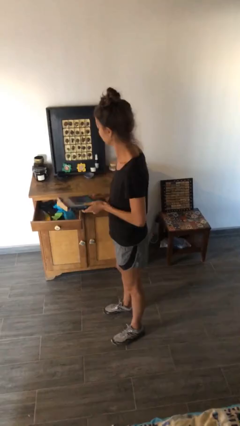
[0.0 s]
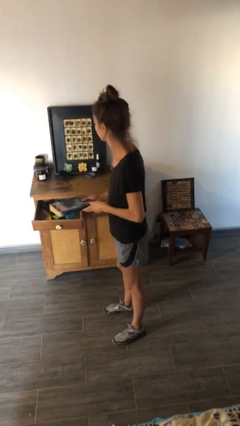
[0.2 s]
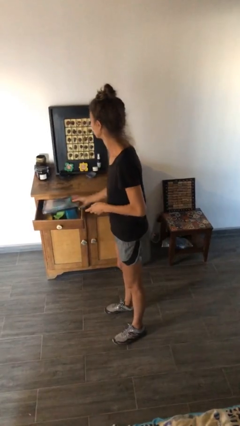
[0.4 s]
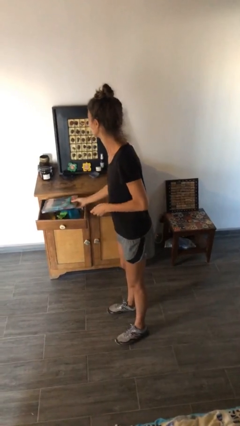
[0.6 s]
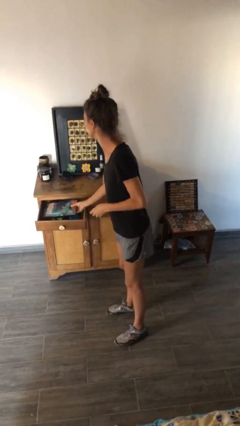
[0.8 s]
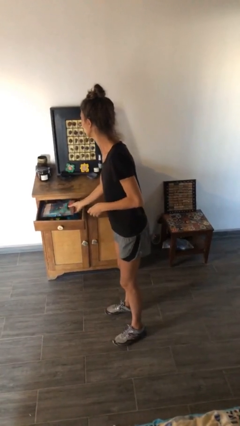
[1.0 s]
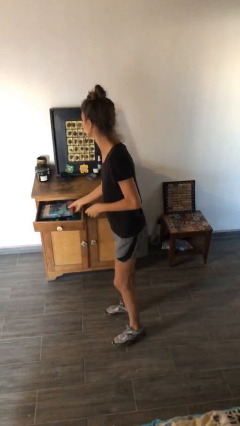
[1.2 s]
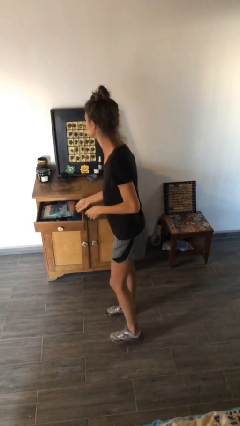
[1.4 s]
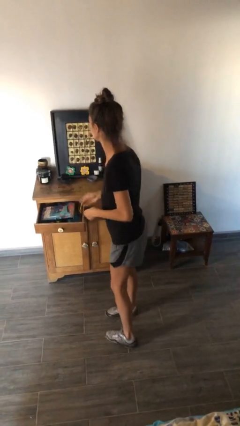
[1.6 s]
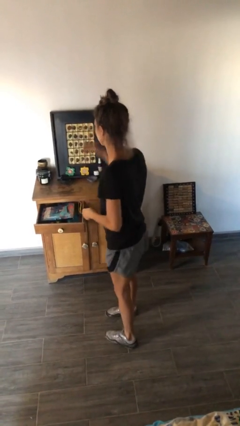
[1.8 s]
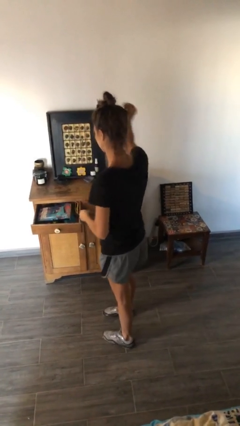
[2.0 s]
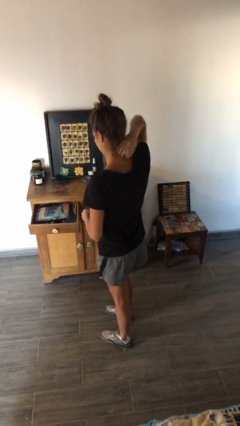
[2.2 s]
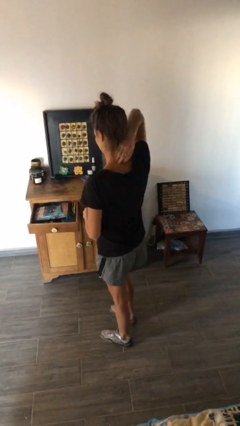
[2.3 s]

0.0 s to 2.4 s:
person puts down object into cabinet

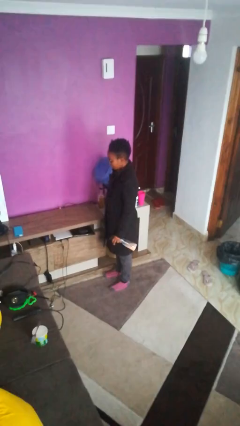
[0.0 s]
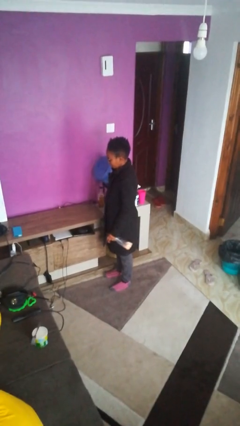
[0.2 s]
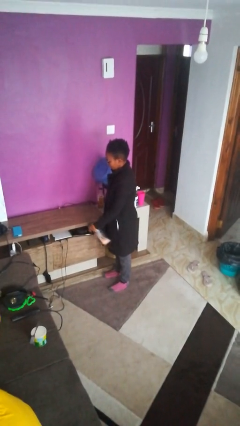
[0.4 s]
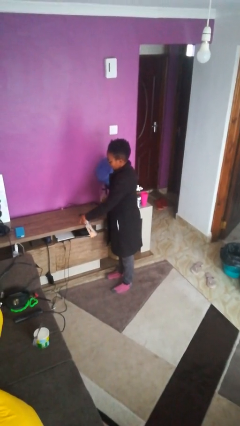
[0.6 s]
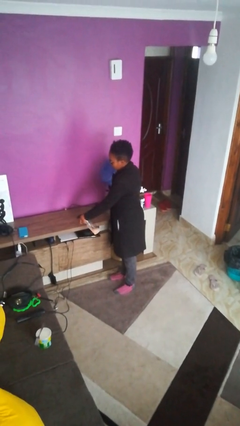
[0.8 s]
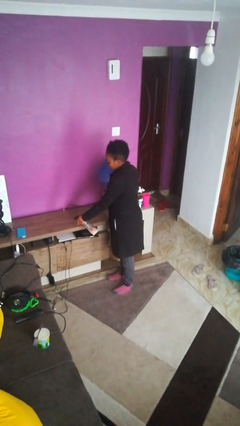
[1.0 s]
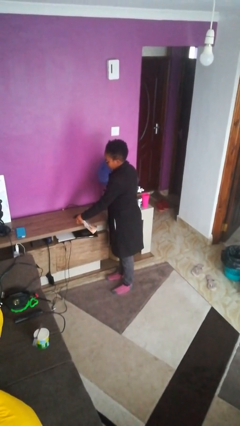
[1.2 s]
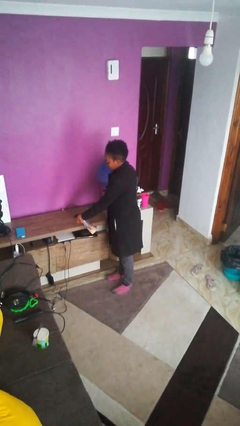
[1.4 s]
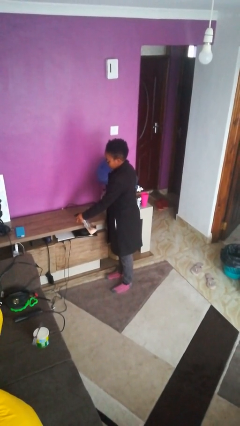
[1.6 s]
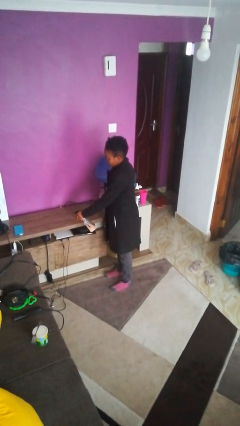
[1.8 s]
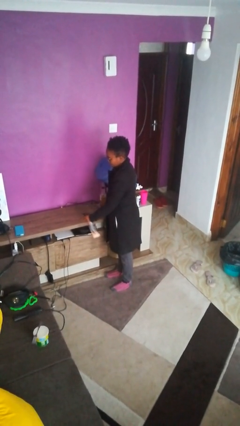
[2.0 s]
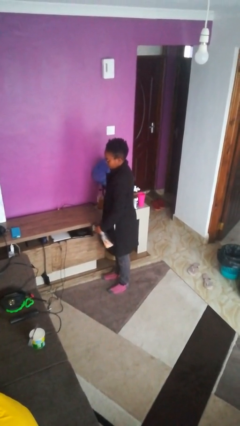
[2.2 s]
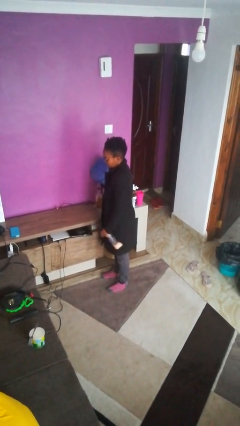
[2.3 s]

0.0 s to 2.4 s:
person sprays from bottle

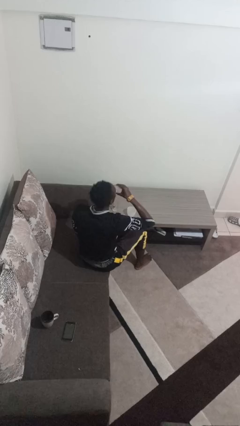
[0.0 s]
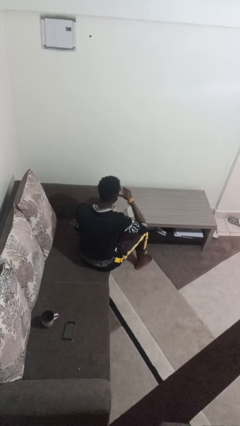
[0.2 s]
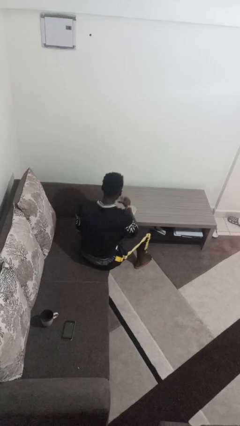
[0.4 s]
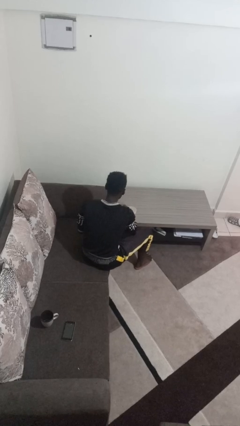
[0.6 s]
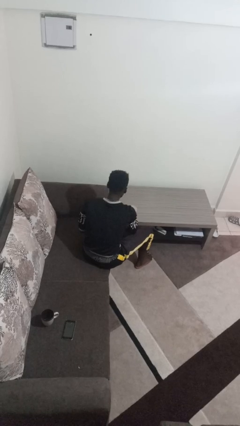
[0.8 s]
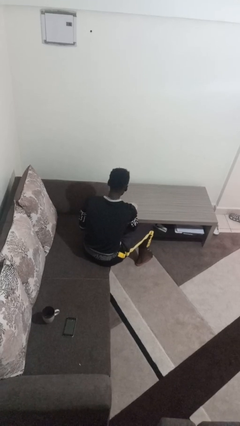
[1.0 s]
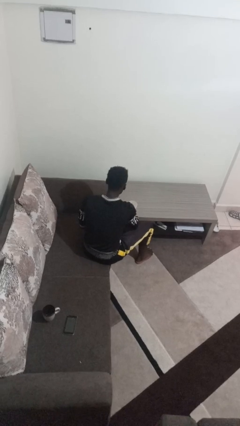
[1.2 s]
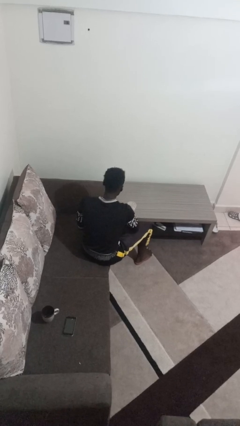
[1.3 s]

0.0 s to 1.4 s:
person puts down object on table

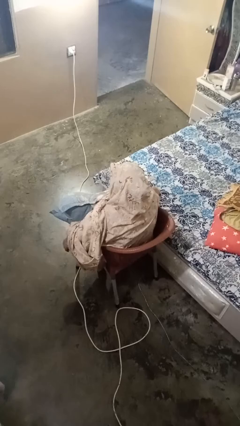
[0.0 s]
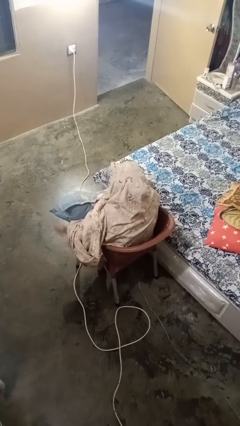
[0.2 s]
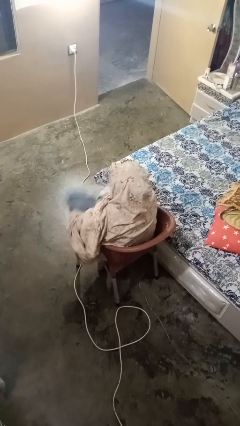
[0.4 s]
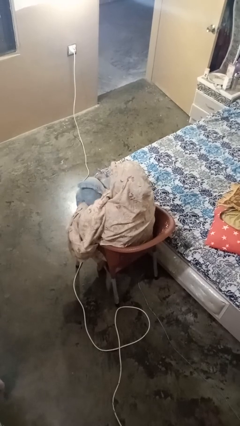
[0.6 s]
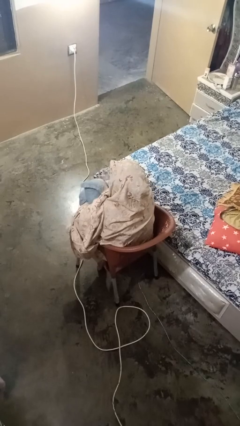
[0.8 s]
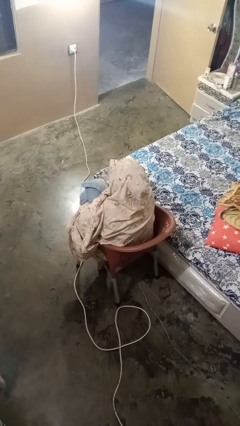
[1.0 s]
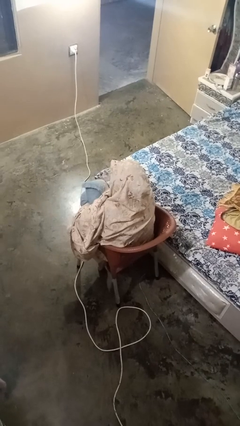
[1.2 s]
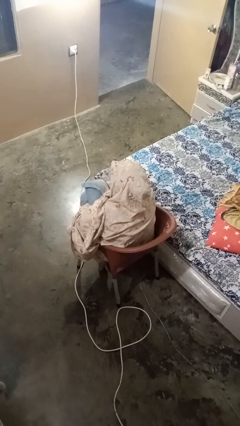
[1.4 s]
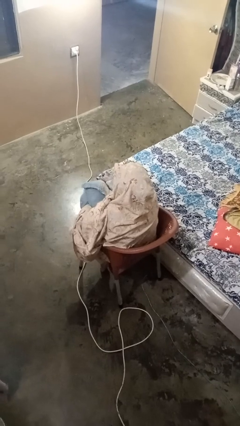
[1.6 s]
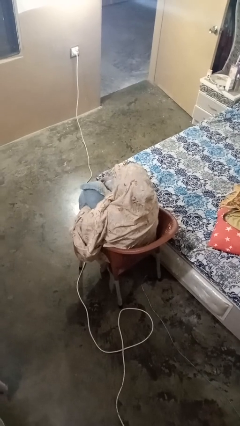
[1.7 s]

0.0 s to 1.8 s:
person squeezes object

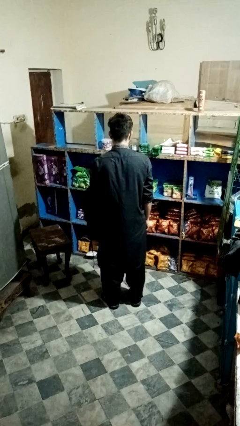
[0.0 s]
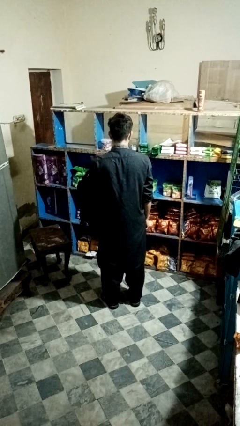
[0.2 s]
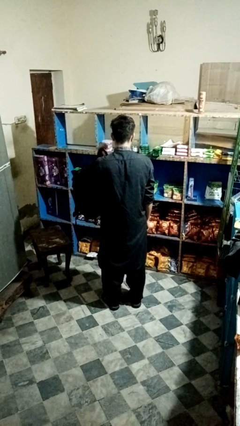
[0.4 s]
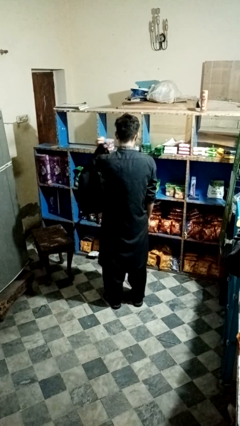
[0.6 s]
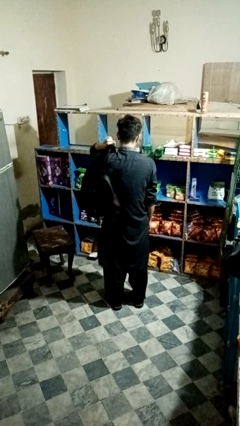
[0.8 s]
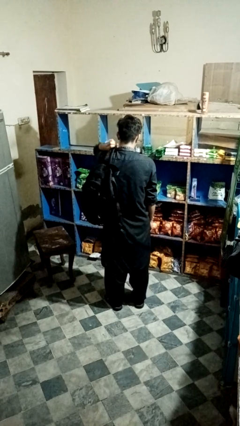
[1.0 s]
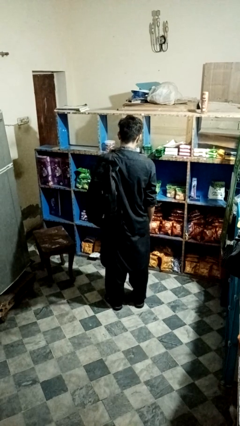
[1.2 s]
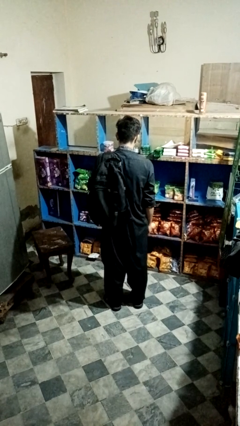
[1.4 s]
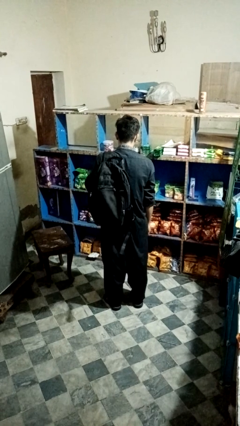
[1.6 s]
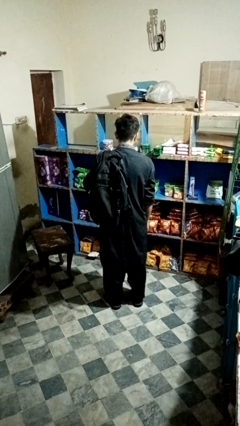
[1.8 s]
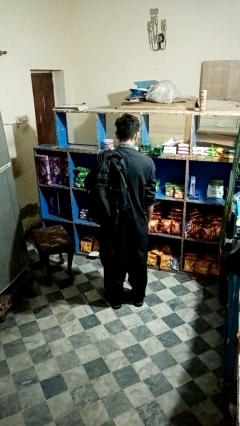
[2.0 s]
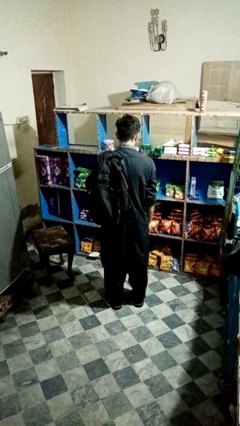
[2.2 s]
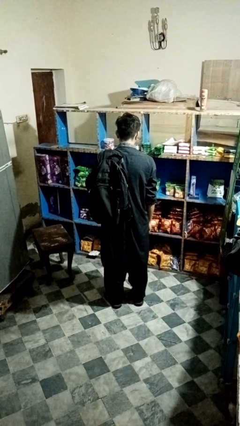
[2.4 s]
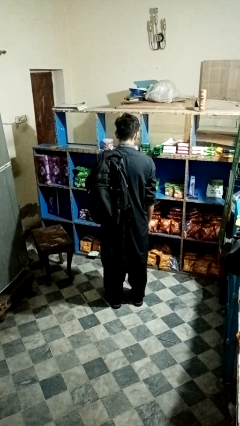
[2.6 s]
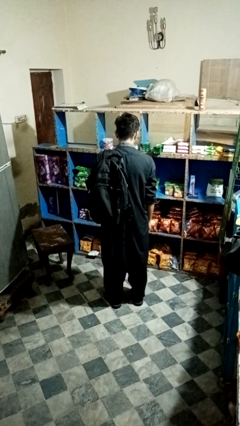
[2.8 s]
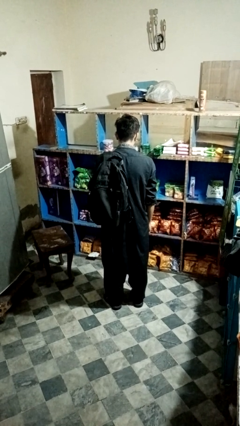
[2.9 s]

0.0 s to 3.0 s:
person puts on backpack

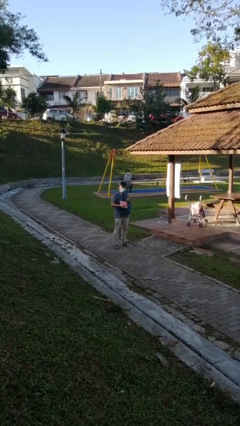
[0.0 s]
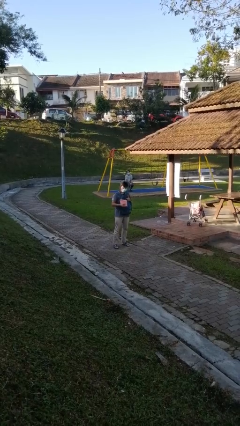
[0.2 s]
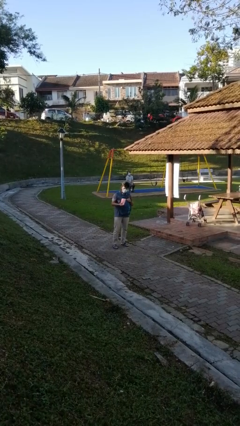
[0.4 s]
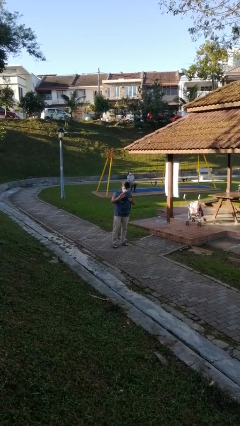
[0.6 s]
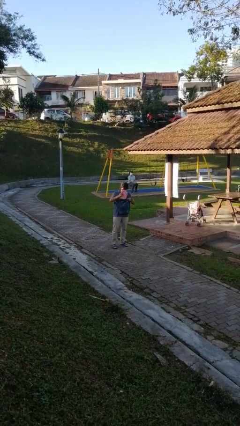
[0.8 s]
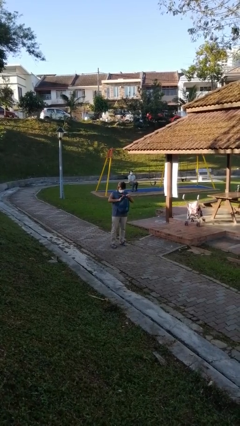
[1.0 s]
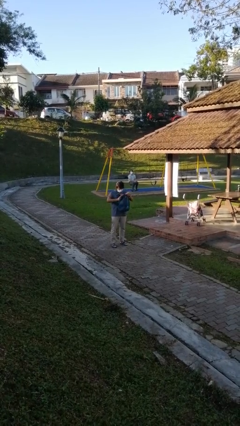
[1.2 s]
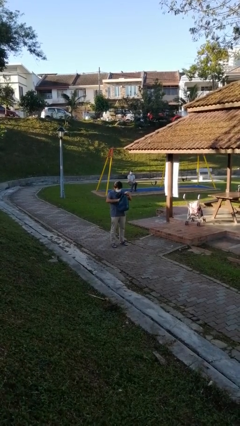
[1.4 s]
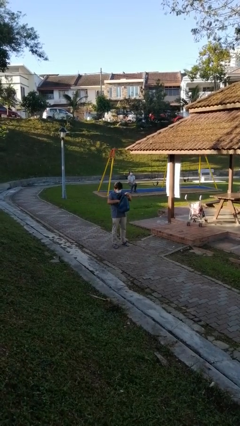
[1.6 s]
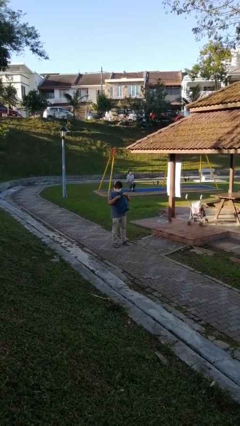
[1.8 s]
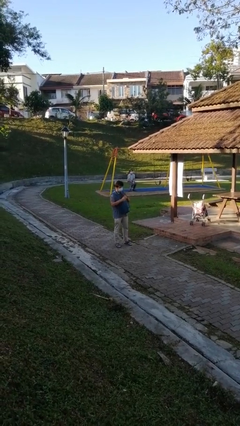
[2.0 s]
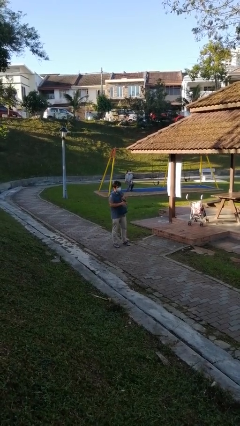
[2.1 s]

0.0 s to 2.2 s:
person puts object into backpack

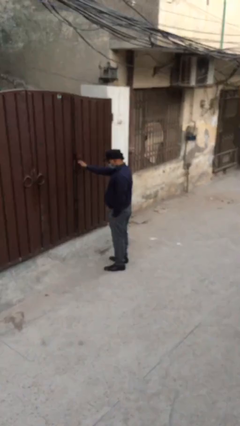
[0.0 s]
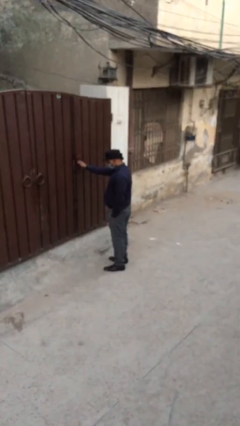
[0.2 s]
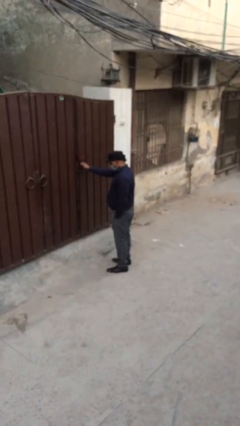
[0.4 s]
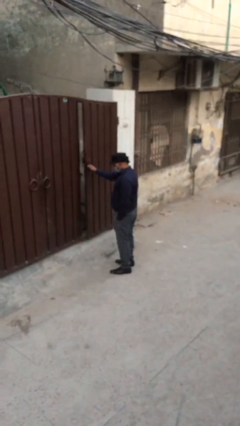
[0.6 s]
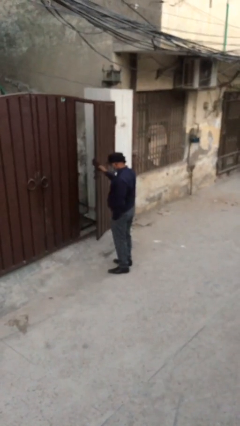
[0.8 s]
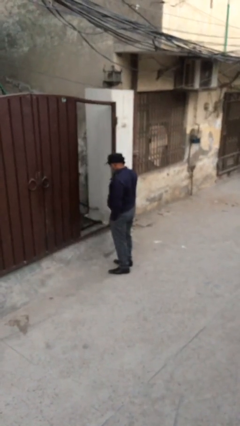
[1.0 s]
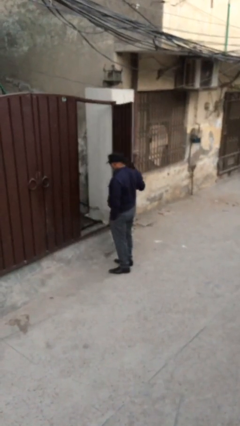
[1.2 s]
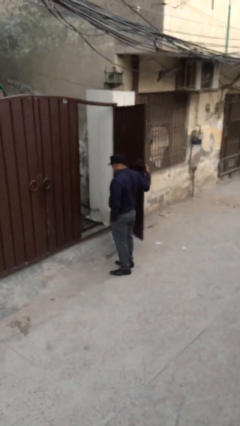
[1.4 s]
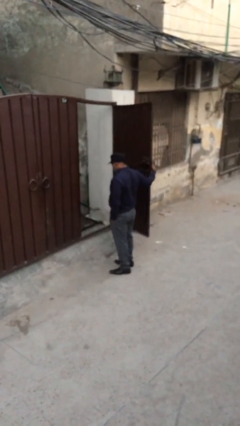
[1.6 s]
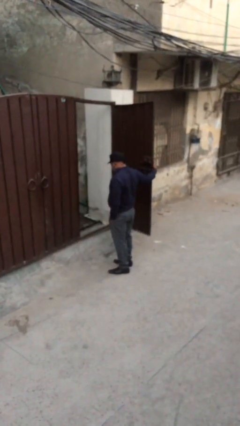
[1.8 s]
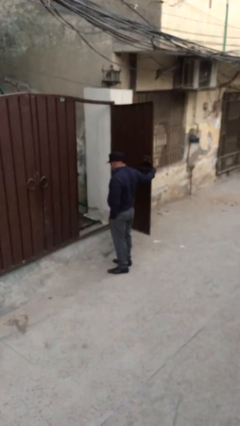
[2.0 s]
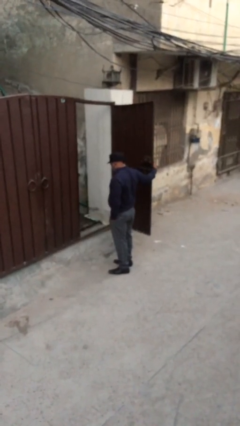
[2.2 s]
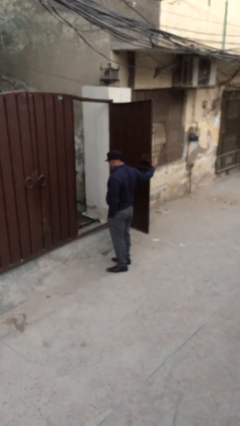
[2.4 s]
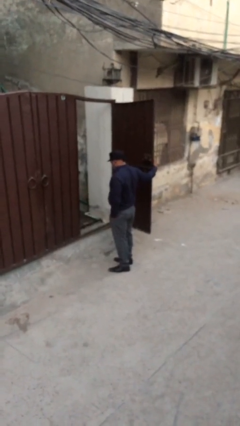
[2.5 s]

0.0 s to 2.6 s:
person opens facility door

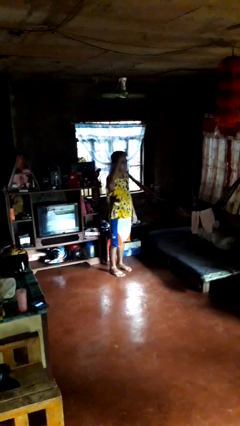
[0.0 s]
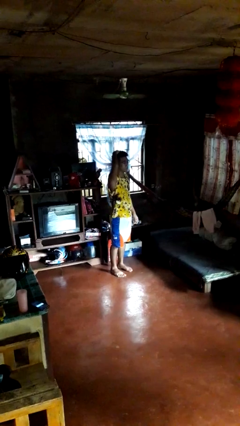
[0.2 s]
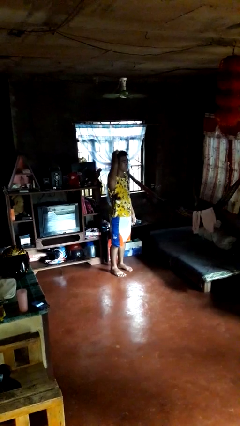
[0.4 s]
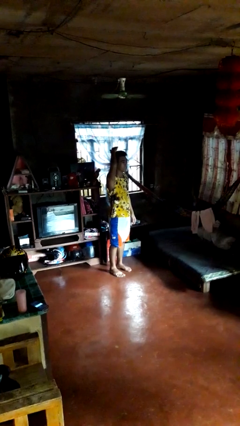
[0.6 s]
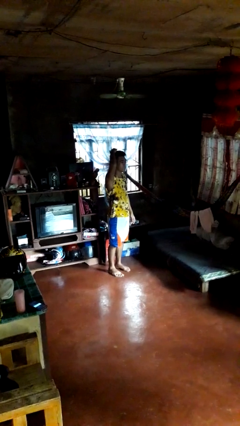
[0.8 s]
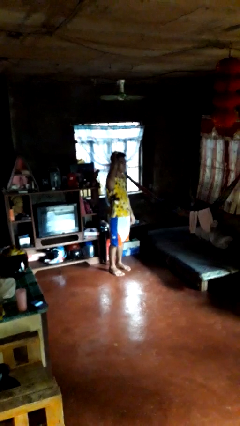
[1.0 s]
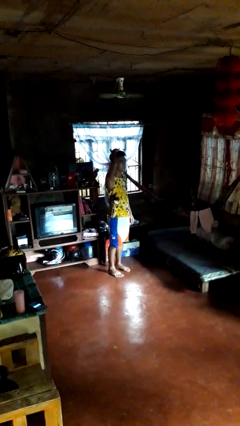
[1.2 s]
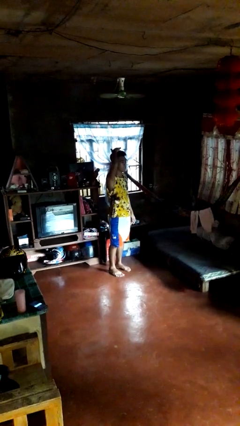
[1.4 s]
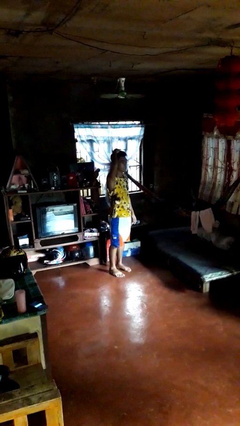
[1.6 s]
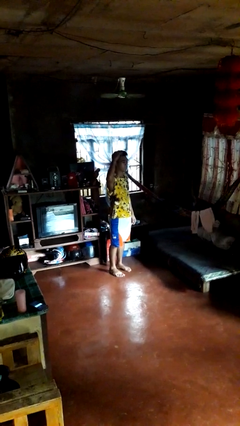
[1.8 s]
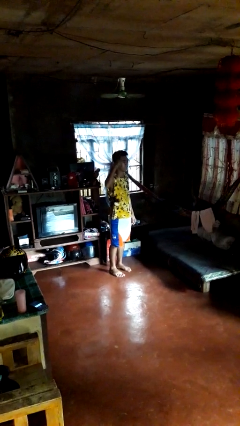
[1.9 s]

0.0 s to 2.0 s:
person pats head
